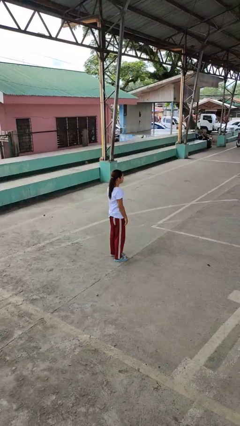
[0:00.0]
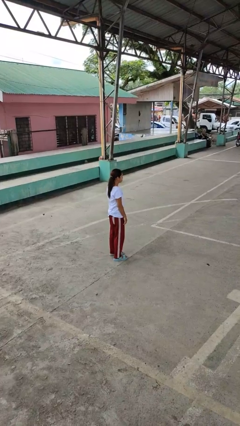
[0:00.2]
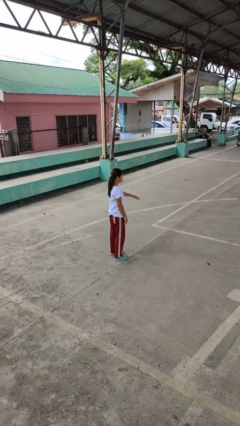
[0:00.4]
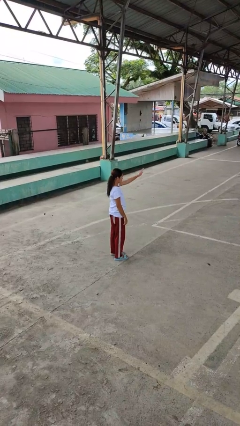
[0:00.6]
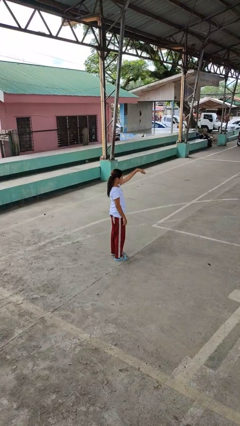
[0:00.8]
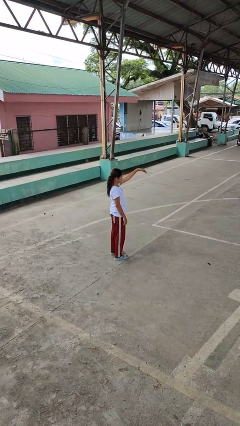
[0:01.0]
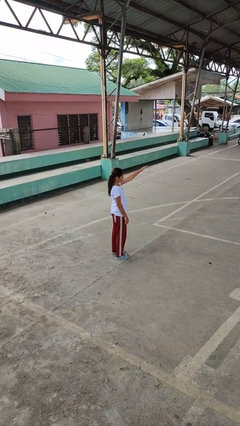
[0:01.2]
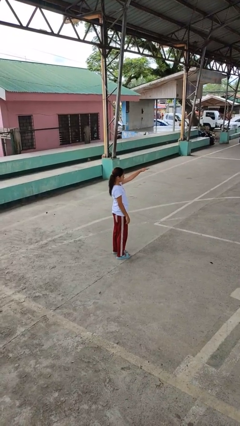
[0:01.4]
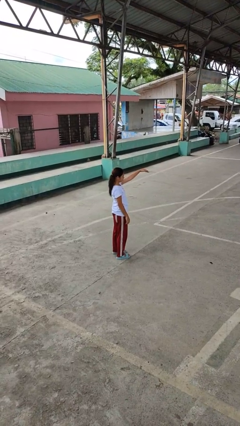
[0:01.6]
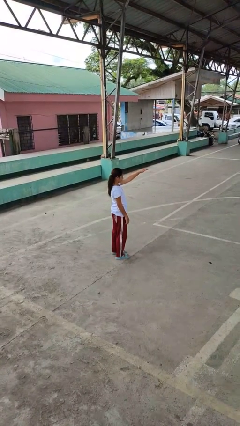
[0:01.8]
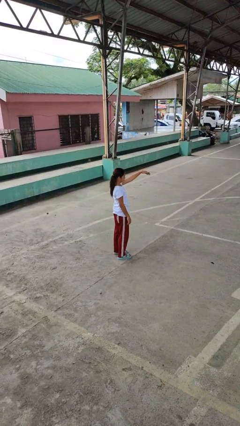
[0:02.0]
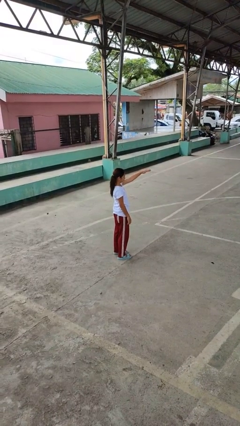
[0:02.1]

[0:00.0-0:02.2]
person gestures come here

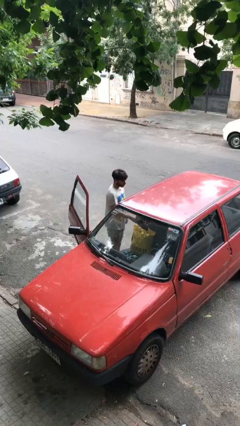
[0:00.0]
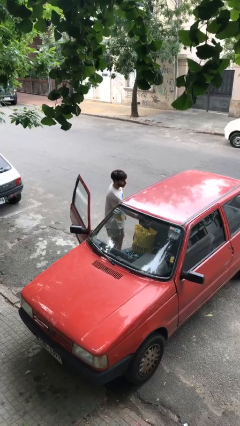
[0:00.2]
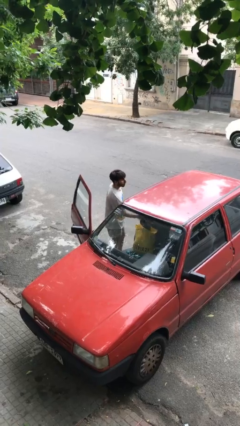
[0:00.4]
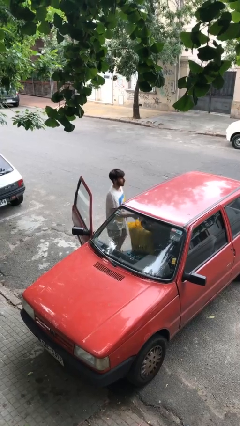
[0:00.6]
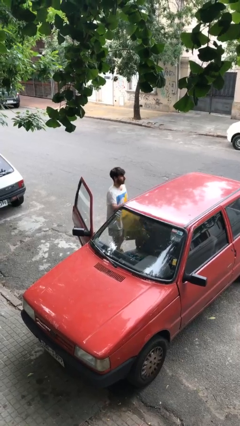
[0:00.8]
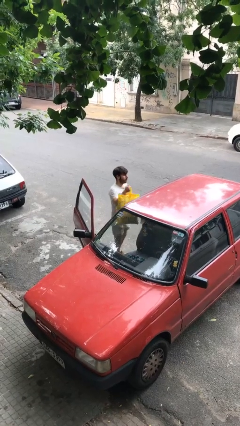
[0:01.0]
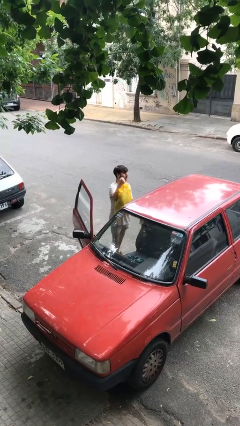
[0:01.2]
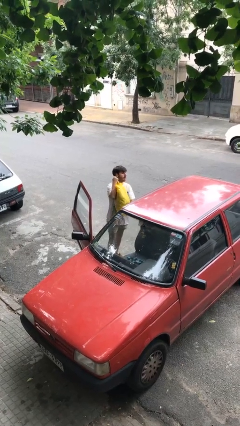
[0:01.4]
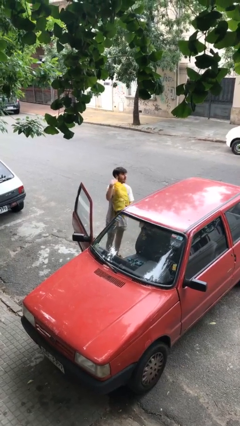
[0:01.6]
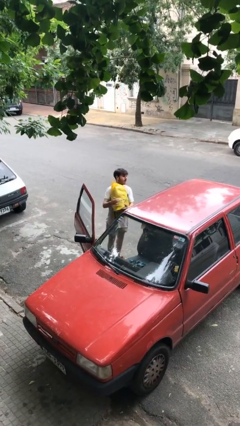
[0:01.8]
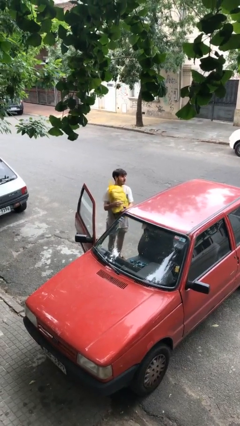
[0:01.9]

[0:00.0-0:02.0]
person unloads car

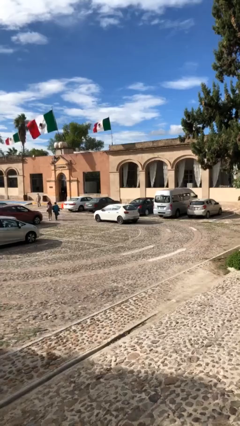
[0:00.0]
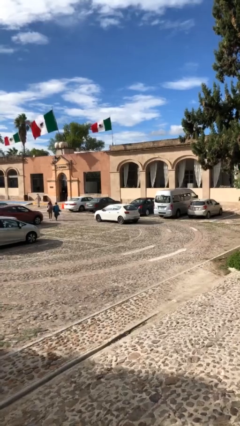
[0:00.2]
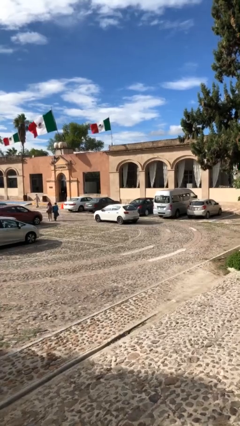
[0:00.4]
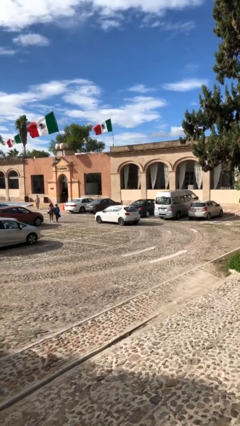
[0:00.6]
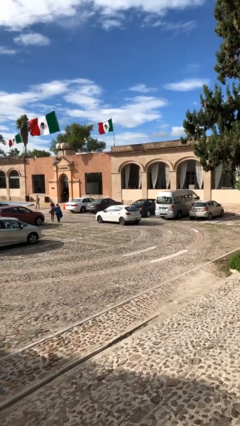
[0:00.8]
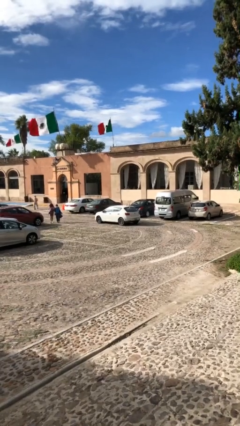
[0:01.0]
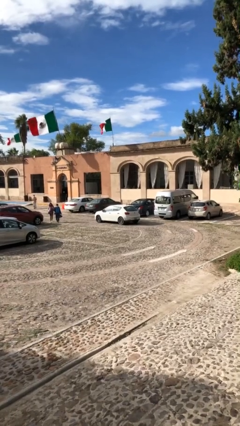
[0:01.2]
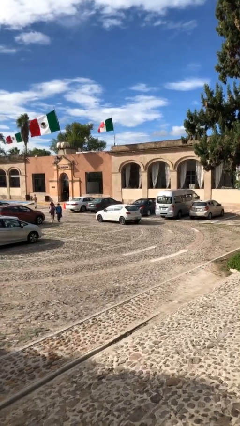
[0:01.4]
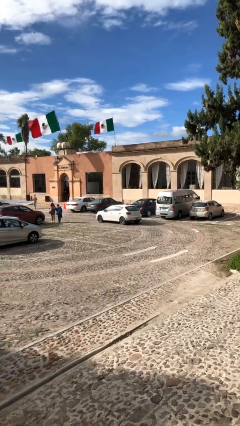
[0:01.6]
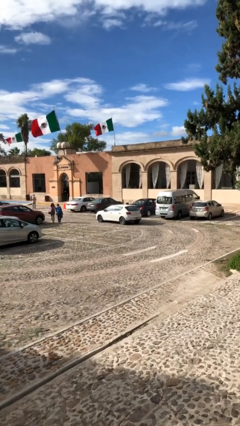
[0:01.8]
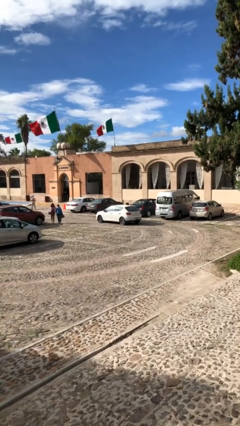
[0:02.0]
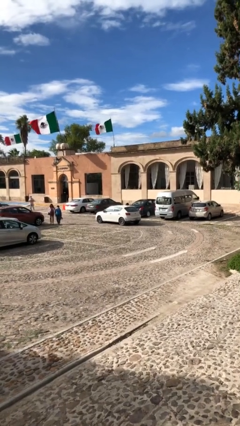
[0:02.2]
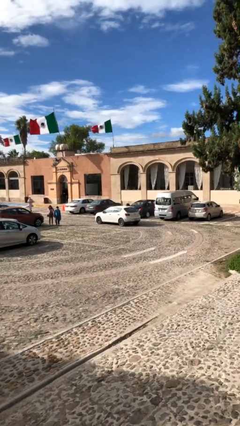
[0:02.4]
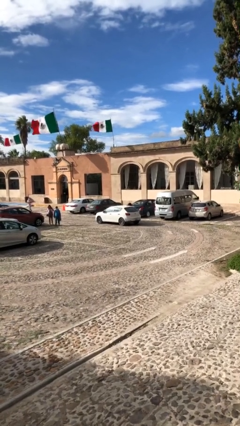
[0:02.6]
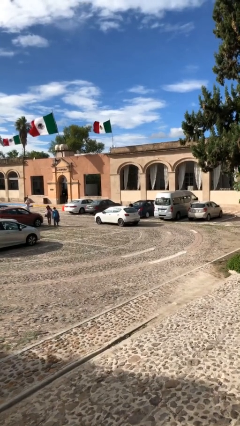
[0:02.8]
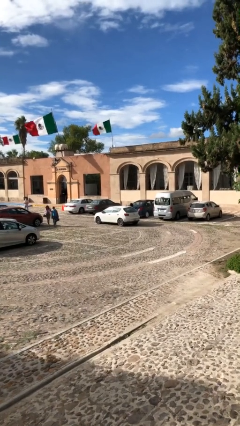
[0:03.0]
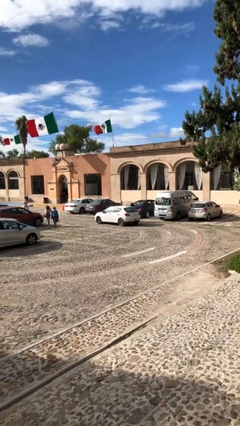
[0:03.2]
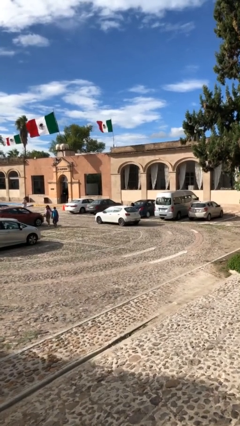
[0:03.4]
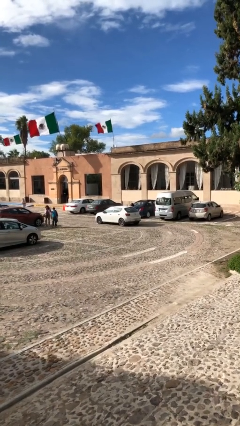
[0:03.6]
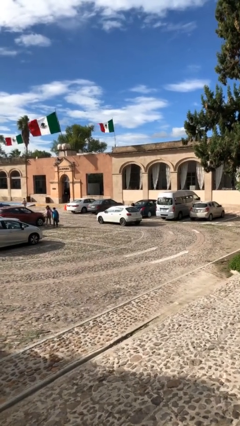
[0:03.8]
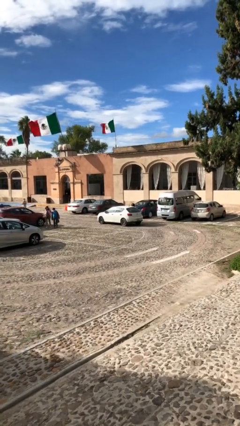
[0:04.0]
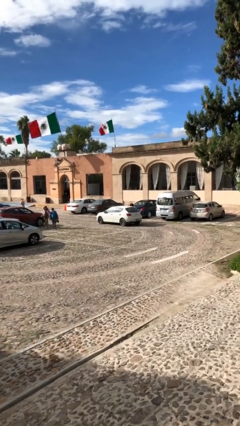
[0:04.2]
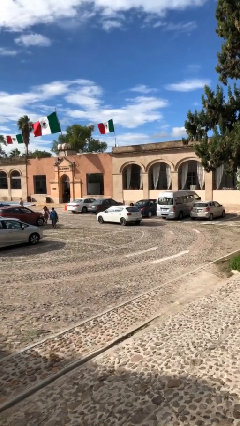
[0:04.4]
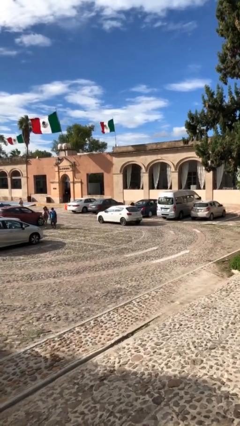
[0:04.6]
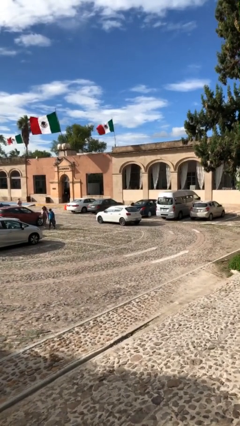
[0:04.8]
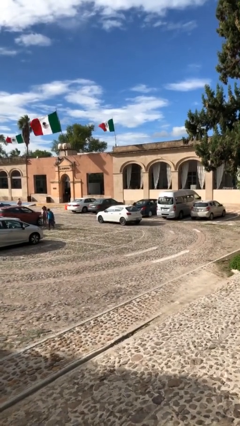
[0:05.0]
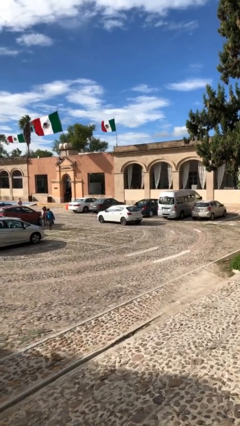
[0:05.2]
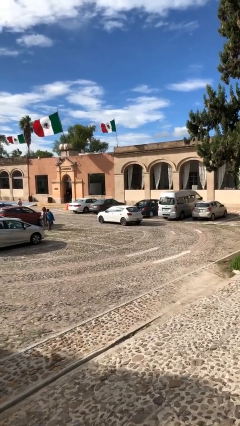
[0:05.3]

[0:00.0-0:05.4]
car drops off person

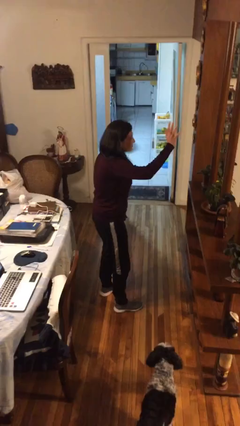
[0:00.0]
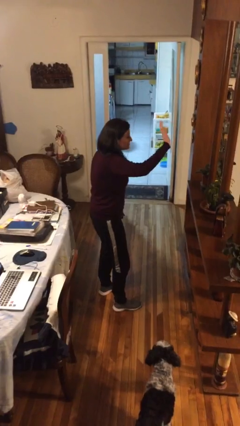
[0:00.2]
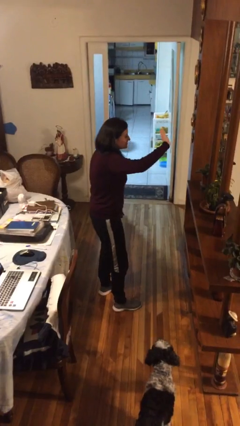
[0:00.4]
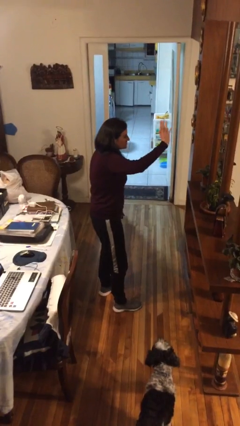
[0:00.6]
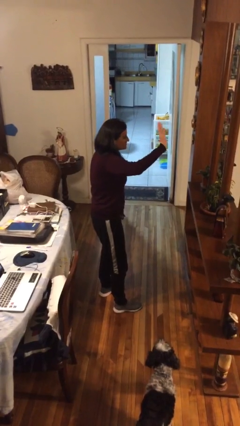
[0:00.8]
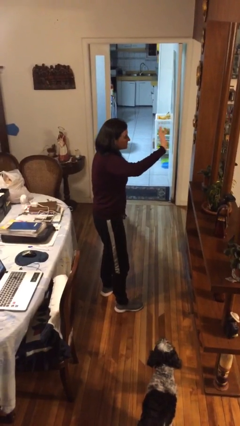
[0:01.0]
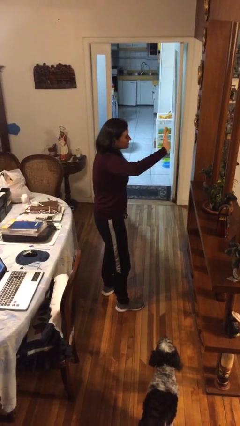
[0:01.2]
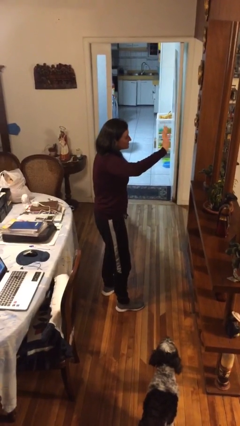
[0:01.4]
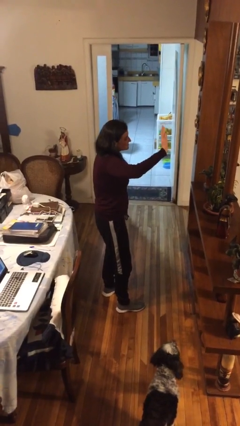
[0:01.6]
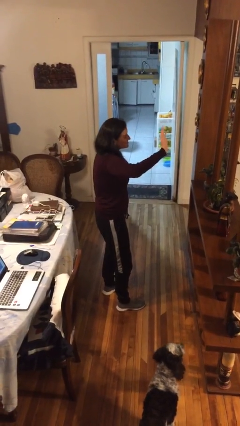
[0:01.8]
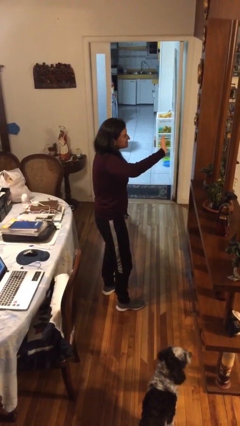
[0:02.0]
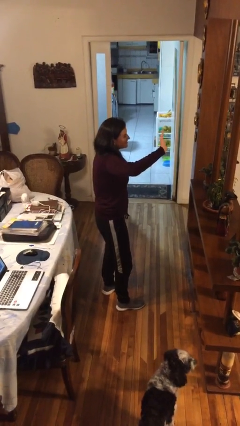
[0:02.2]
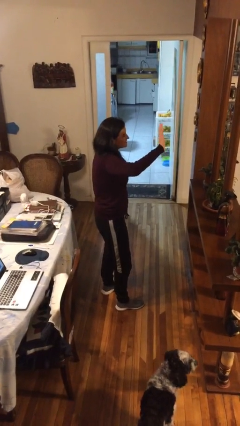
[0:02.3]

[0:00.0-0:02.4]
person waves at person

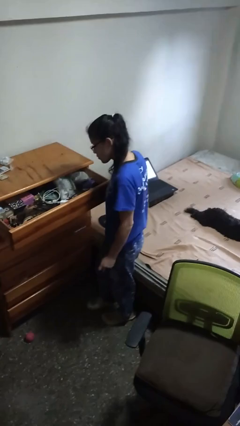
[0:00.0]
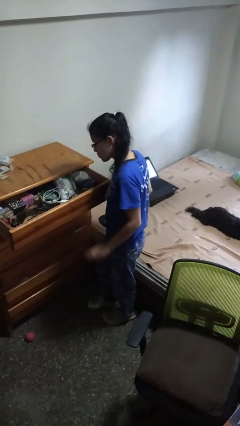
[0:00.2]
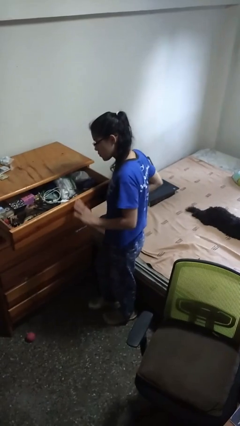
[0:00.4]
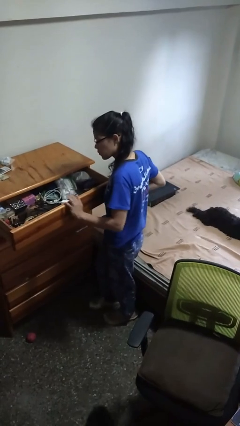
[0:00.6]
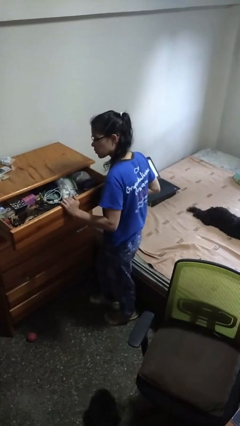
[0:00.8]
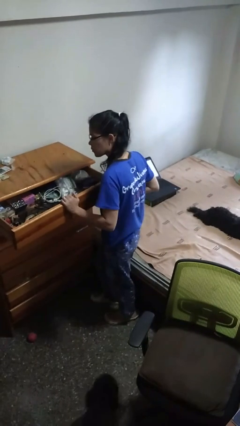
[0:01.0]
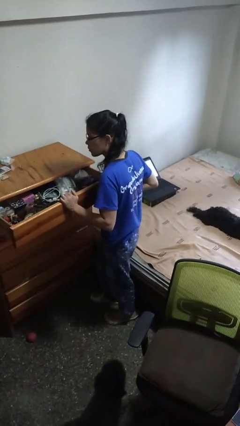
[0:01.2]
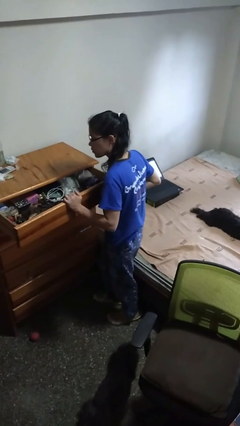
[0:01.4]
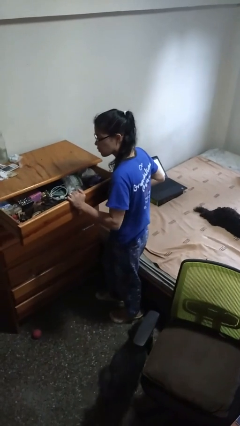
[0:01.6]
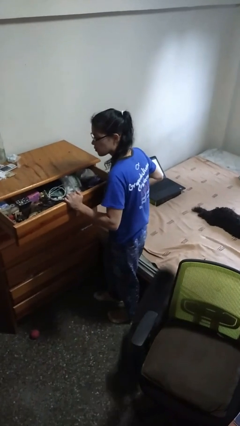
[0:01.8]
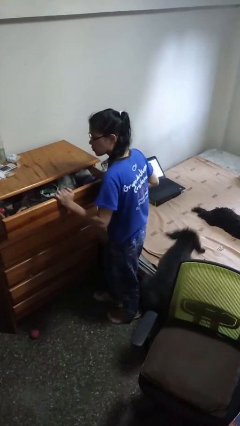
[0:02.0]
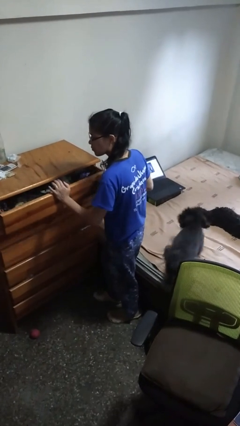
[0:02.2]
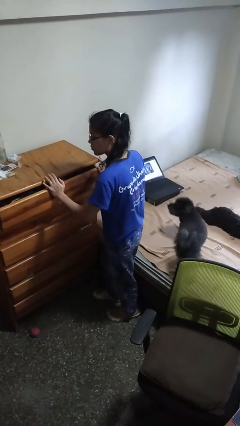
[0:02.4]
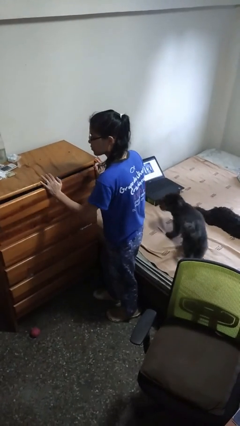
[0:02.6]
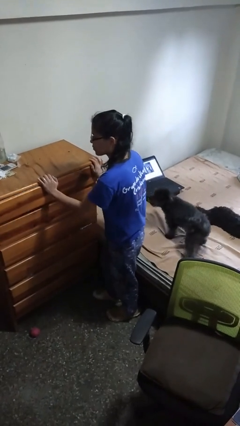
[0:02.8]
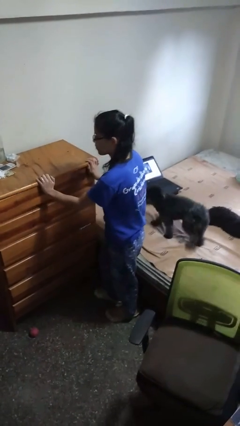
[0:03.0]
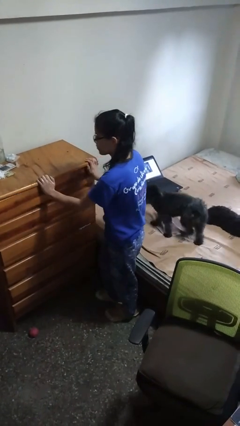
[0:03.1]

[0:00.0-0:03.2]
person closes dresser drawer

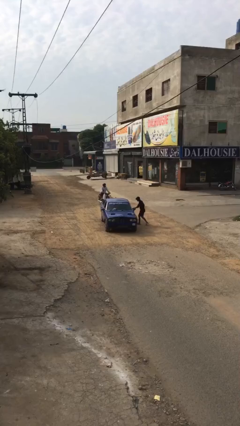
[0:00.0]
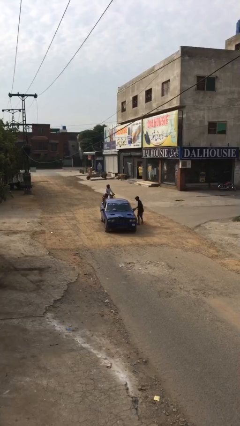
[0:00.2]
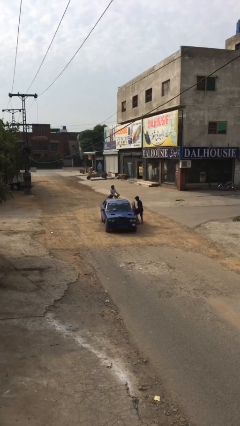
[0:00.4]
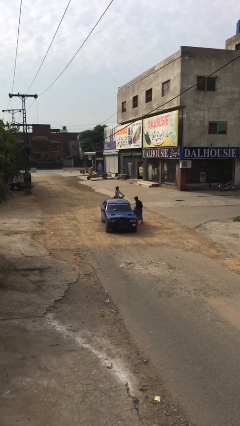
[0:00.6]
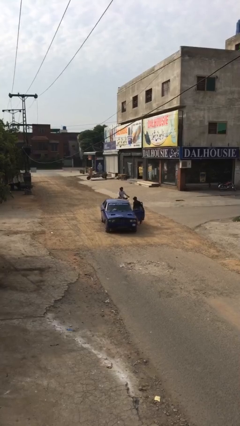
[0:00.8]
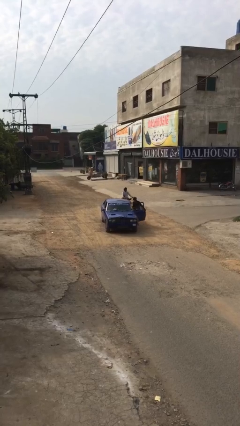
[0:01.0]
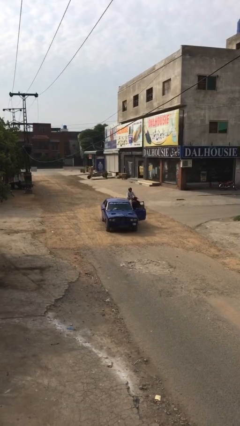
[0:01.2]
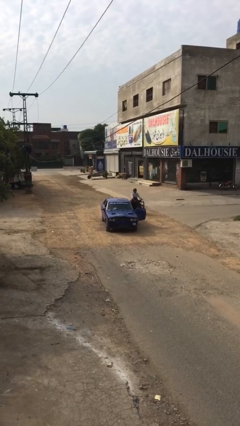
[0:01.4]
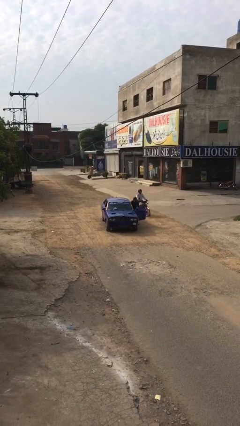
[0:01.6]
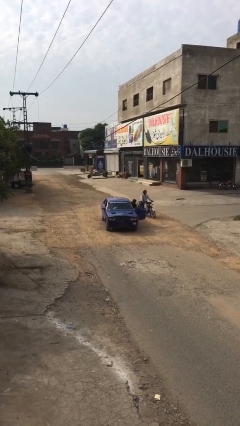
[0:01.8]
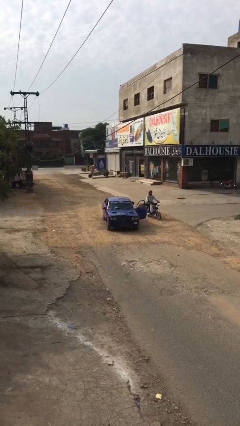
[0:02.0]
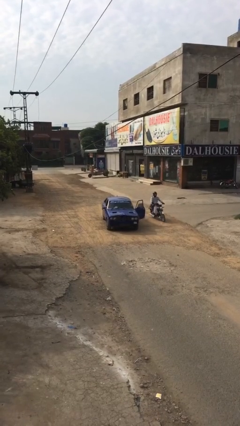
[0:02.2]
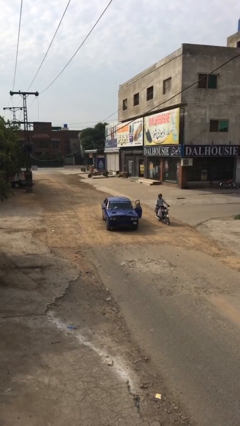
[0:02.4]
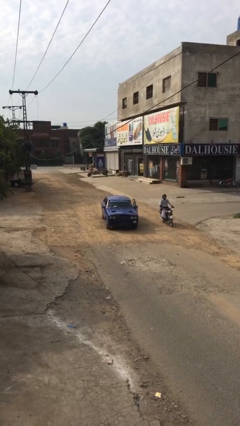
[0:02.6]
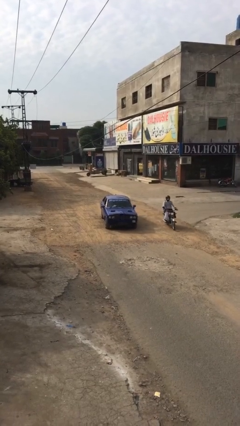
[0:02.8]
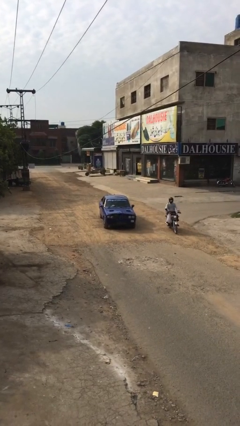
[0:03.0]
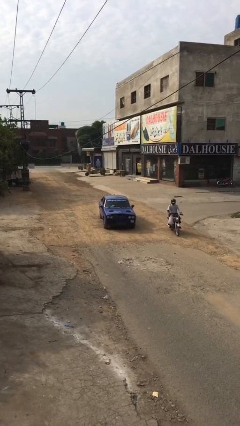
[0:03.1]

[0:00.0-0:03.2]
car picks up person
